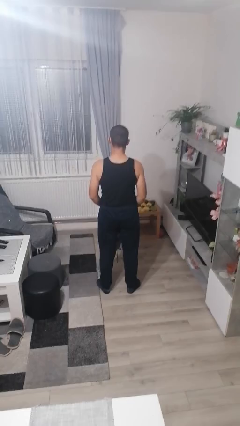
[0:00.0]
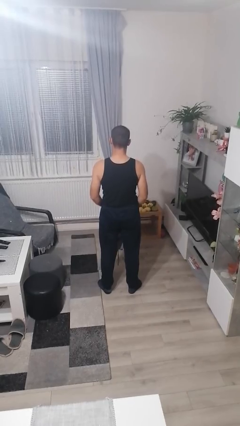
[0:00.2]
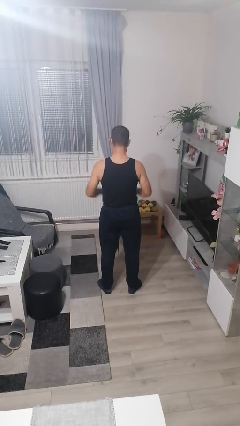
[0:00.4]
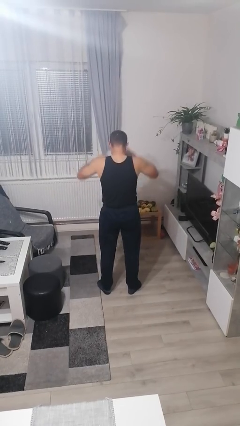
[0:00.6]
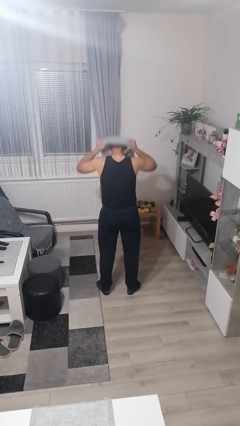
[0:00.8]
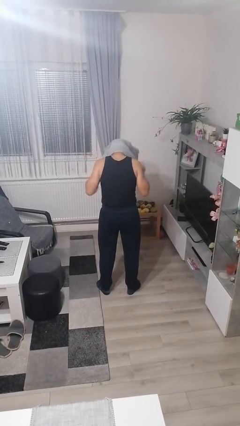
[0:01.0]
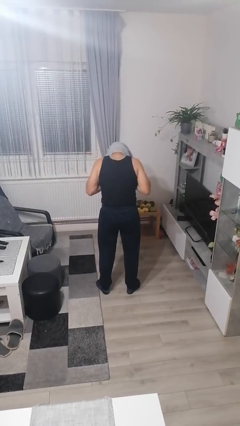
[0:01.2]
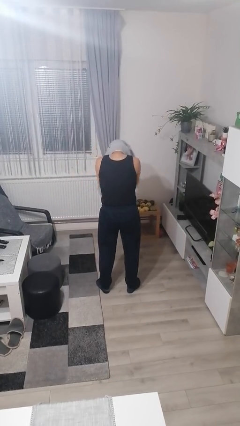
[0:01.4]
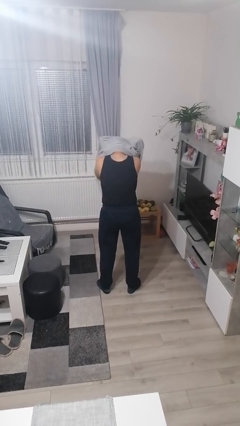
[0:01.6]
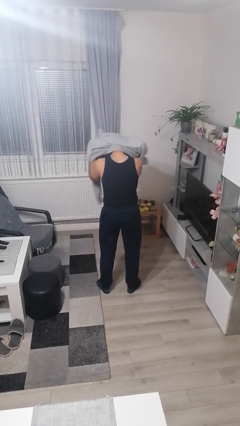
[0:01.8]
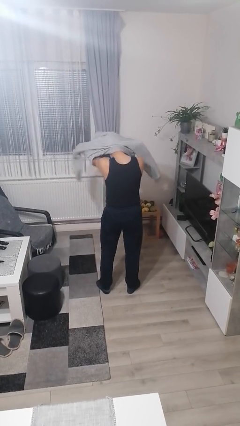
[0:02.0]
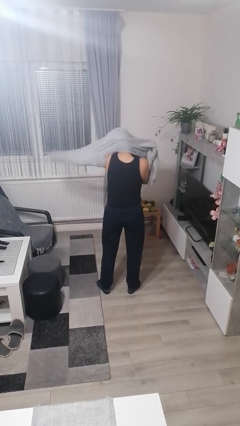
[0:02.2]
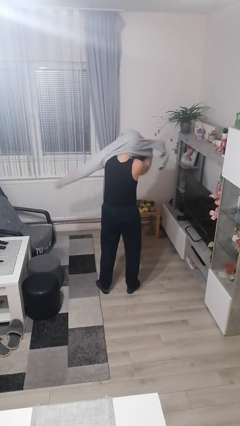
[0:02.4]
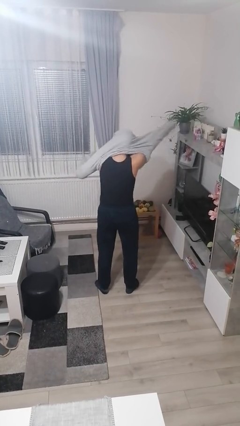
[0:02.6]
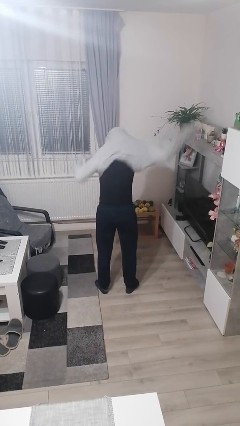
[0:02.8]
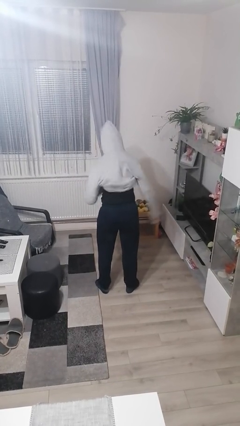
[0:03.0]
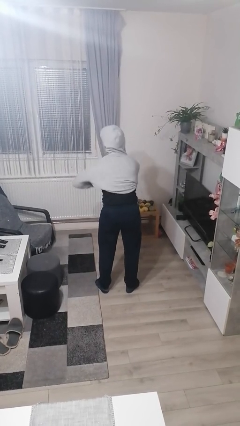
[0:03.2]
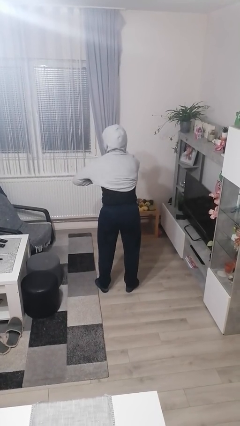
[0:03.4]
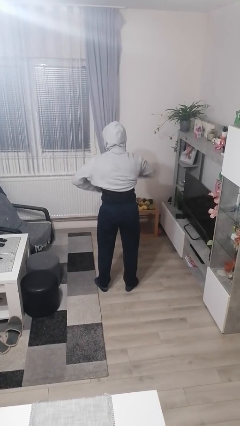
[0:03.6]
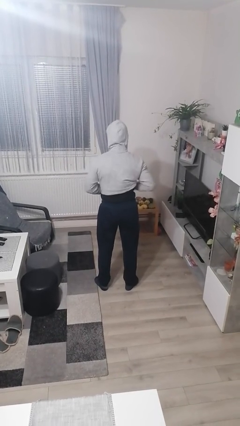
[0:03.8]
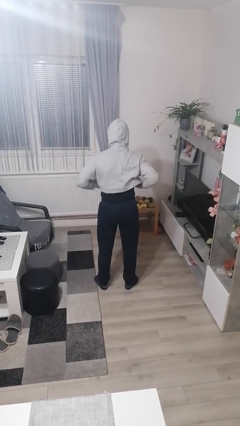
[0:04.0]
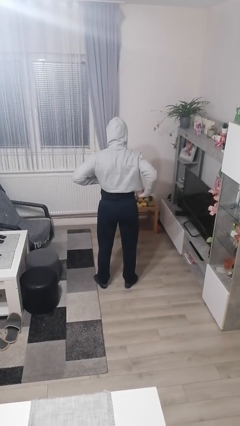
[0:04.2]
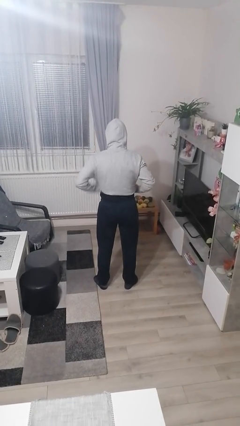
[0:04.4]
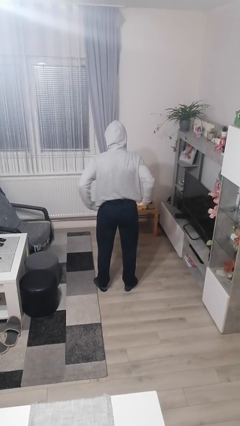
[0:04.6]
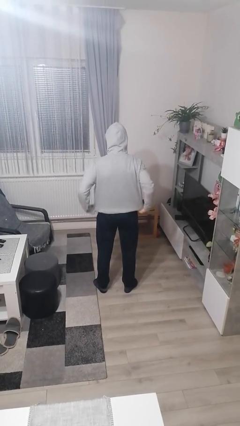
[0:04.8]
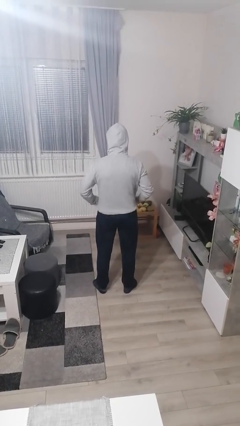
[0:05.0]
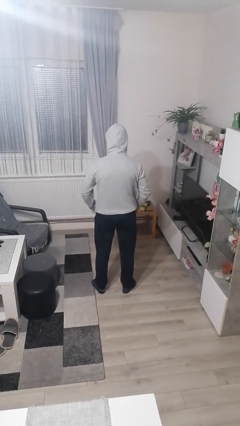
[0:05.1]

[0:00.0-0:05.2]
person puts on hoodie

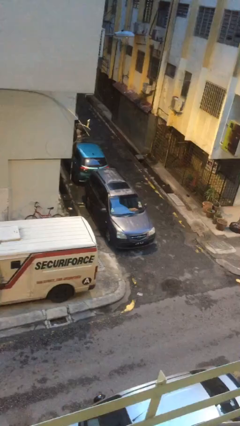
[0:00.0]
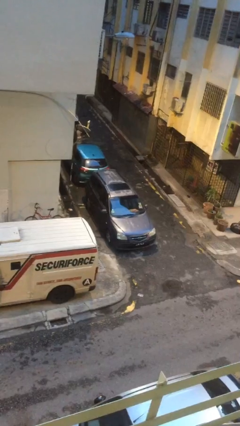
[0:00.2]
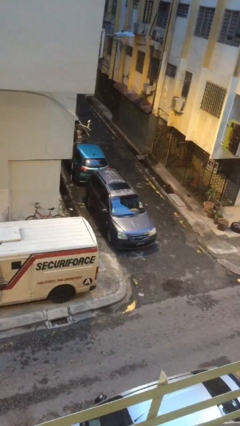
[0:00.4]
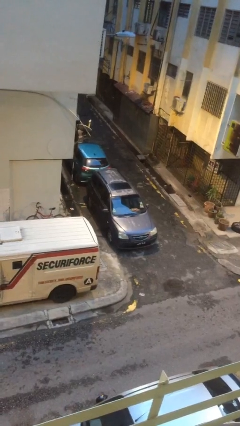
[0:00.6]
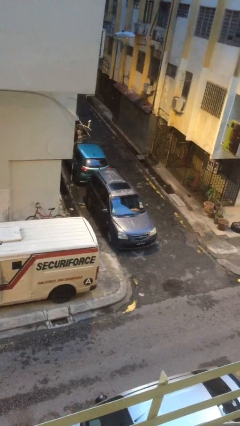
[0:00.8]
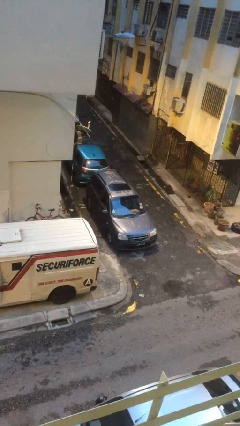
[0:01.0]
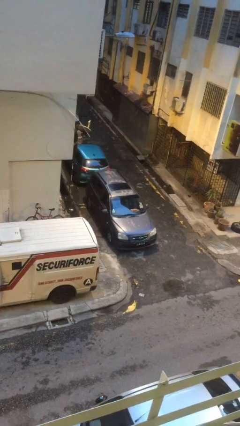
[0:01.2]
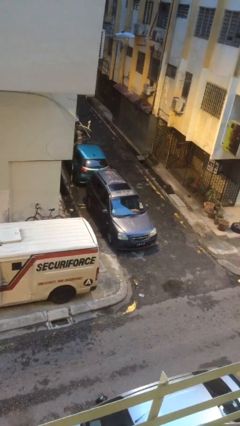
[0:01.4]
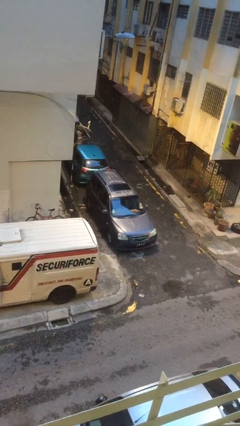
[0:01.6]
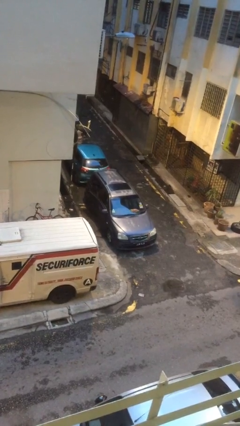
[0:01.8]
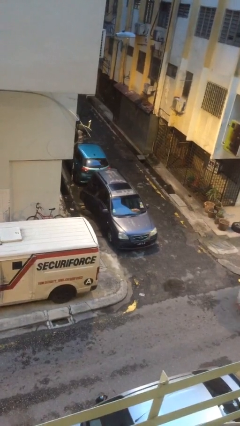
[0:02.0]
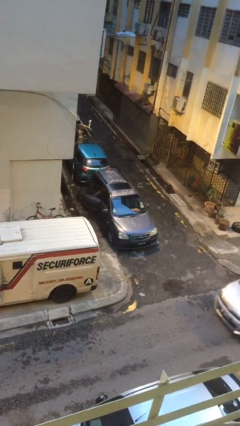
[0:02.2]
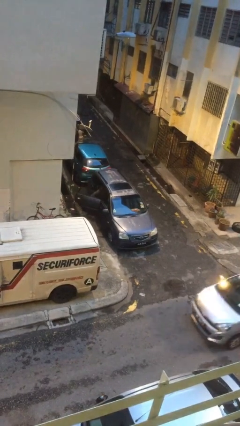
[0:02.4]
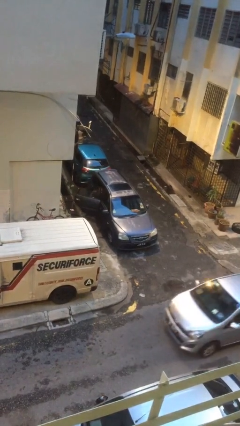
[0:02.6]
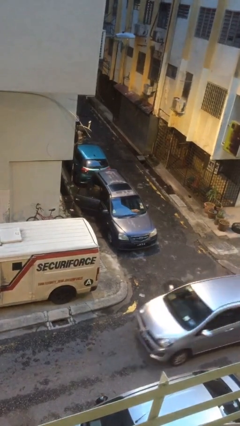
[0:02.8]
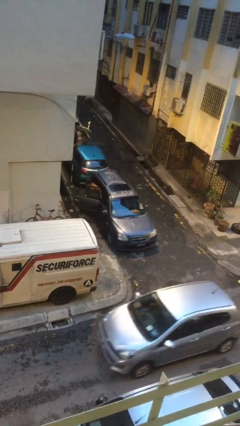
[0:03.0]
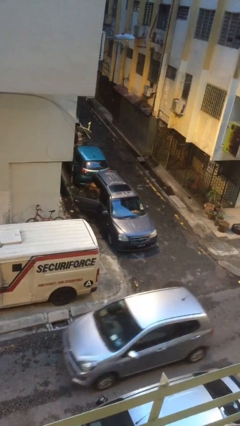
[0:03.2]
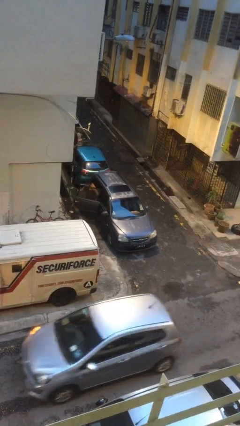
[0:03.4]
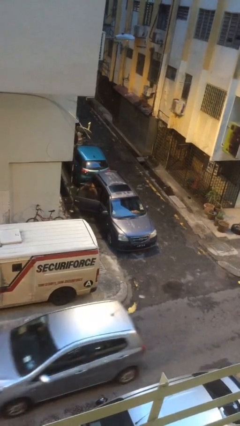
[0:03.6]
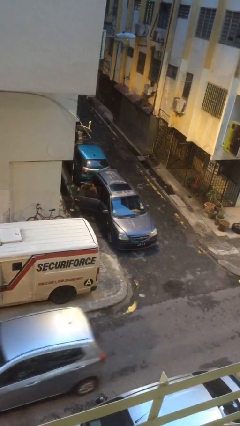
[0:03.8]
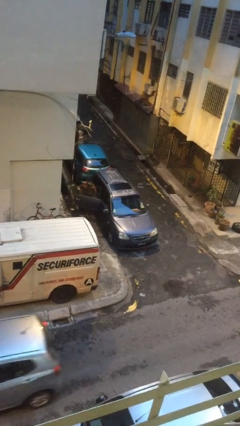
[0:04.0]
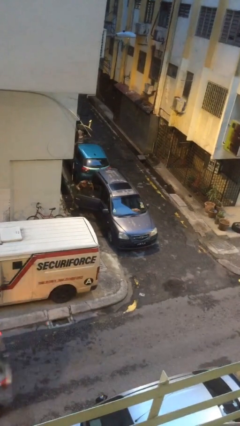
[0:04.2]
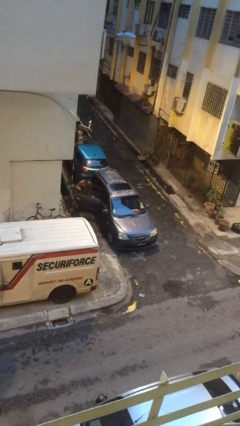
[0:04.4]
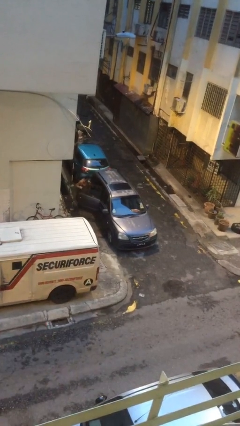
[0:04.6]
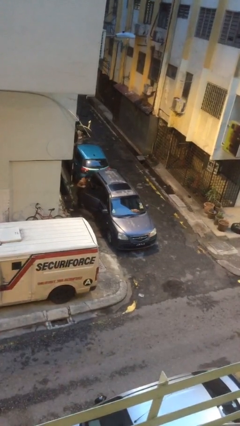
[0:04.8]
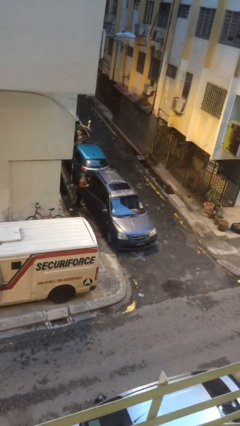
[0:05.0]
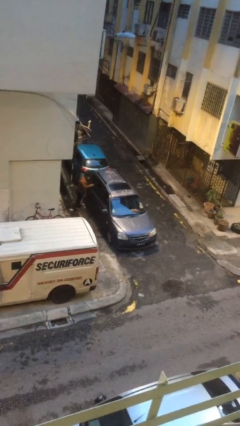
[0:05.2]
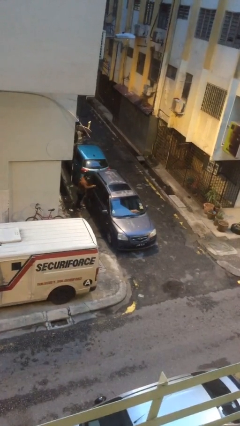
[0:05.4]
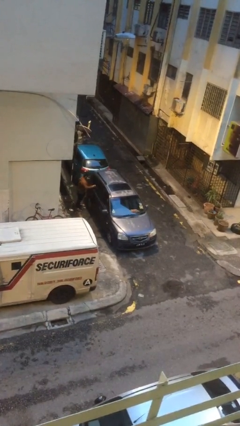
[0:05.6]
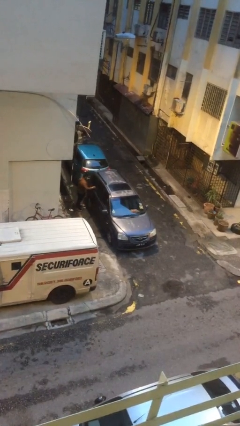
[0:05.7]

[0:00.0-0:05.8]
car drops off person

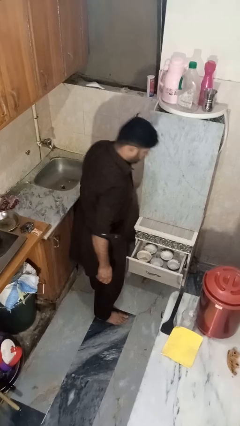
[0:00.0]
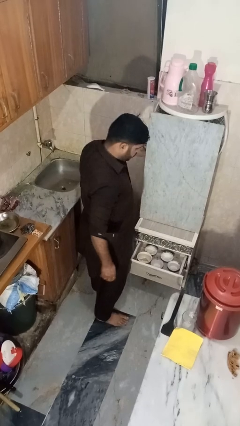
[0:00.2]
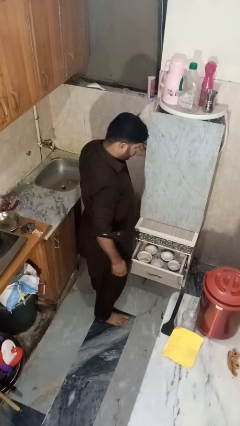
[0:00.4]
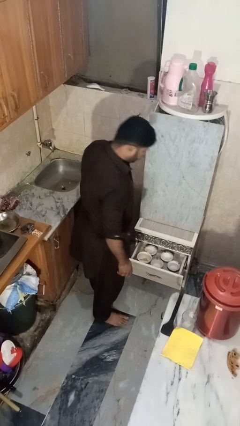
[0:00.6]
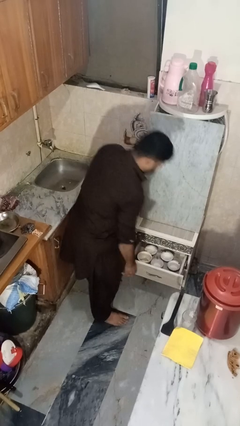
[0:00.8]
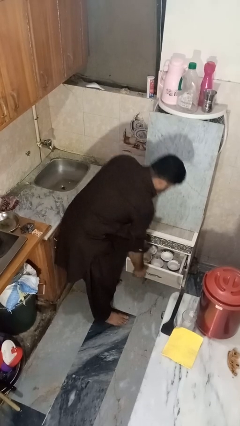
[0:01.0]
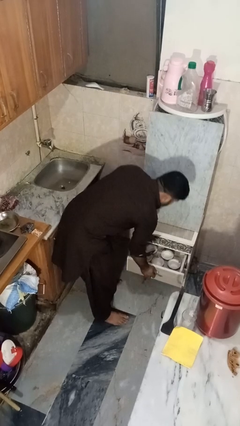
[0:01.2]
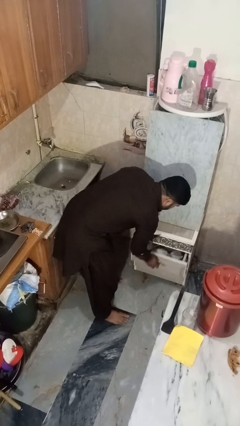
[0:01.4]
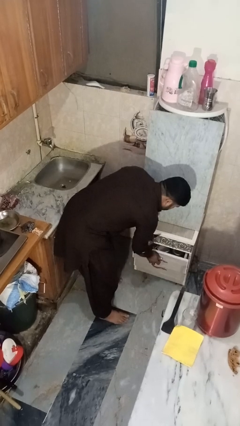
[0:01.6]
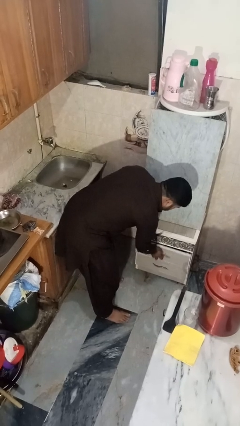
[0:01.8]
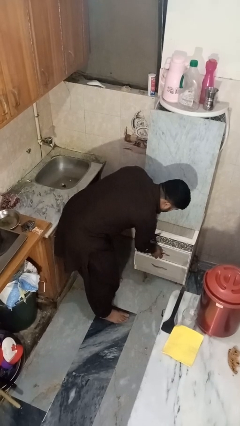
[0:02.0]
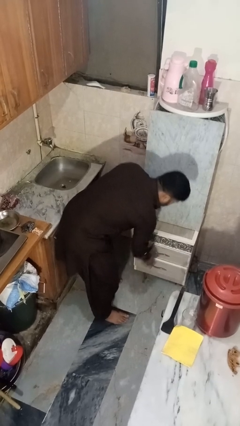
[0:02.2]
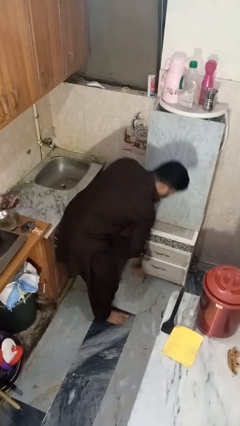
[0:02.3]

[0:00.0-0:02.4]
person closes kitchen drawer

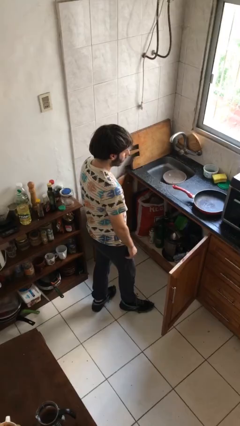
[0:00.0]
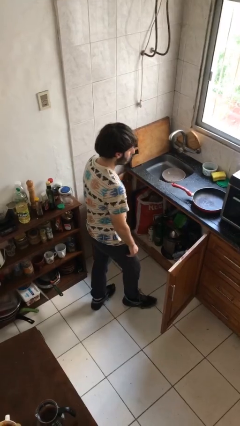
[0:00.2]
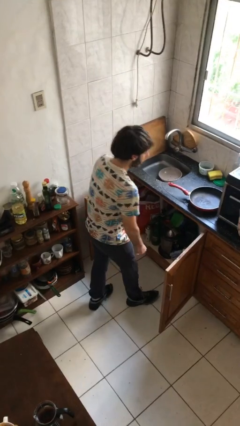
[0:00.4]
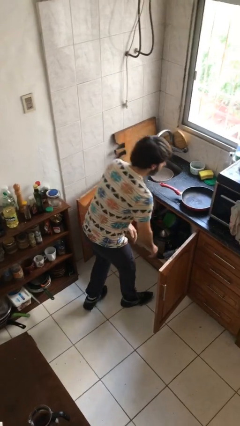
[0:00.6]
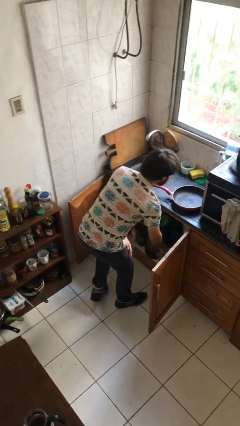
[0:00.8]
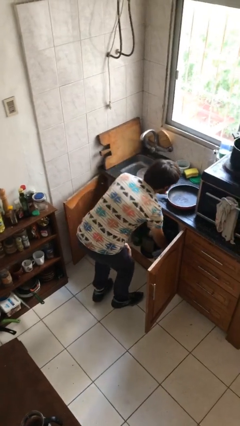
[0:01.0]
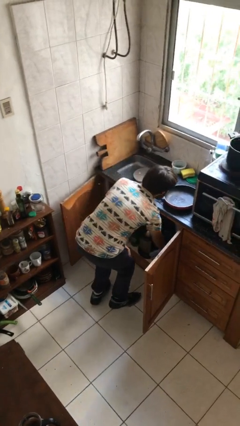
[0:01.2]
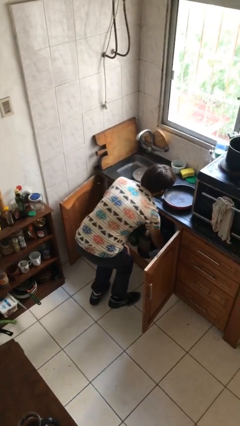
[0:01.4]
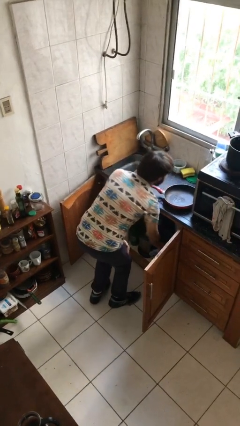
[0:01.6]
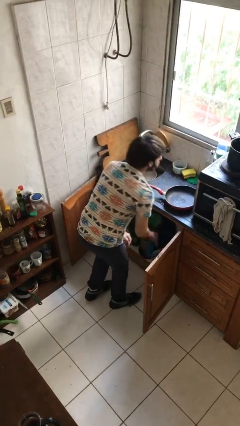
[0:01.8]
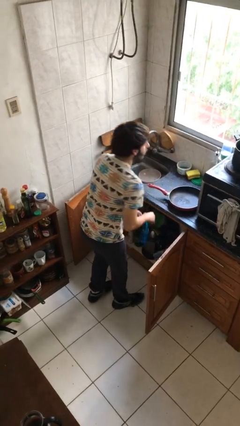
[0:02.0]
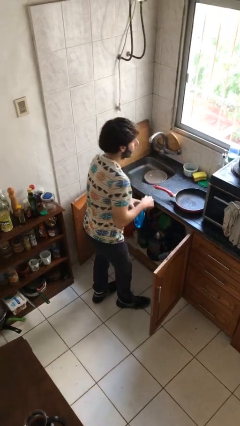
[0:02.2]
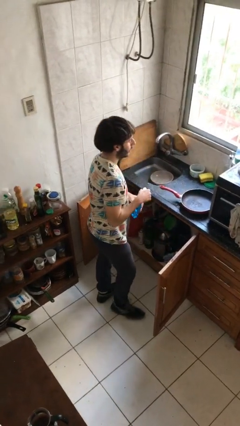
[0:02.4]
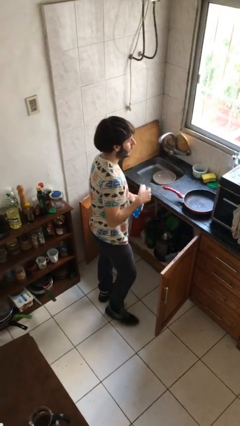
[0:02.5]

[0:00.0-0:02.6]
person picks up object from cabinet

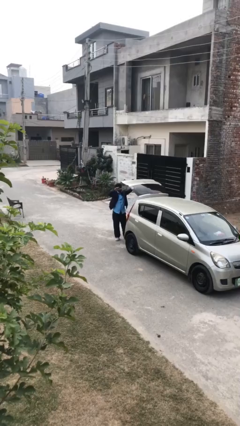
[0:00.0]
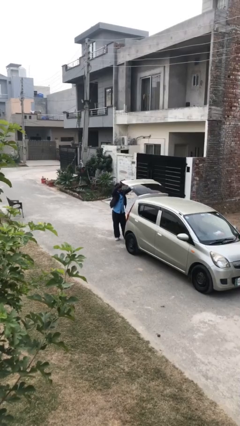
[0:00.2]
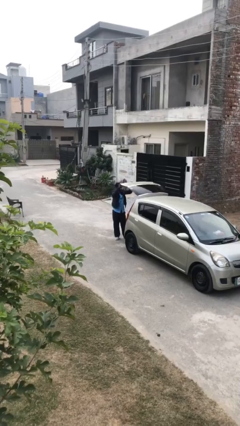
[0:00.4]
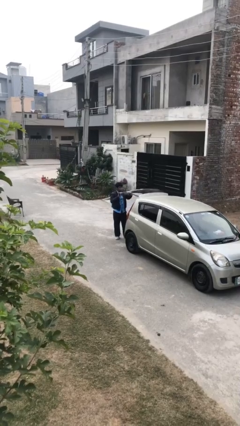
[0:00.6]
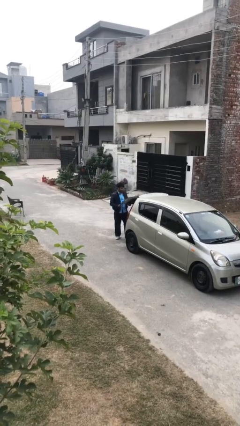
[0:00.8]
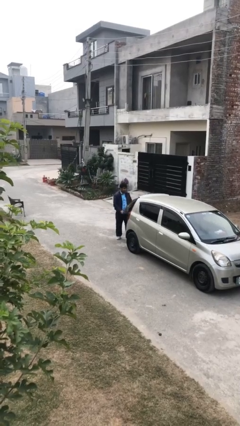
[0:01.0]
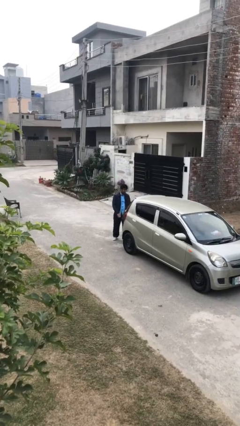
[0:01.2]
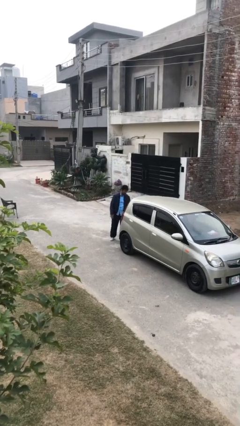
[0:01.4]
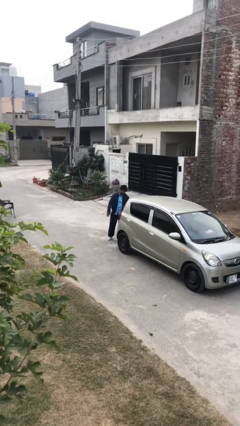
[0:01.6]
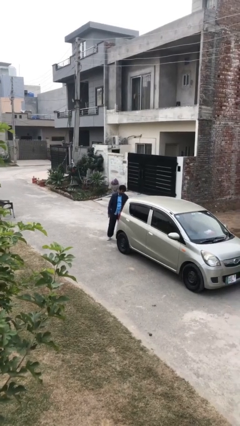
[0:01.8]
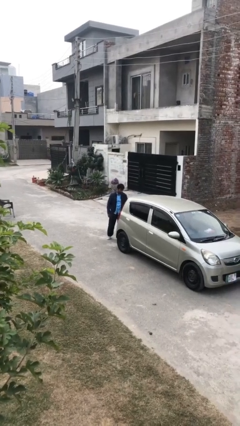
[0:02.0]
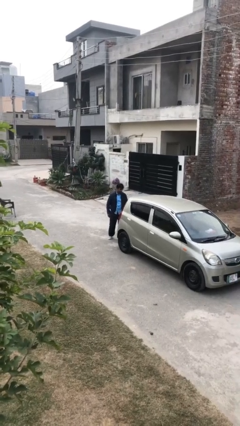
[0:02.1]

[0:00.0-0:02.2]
person closes car trunk
